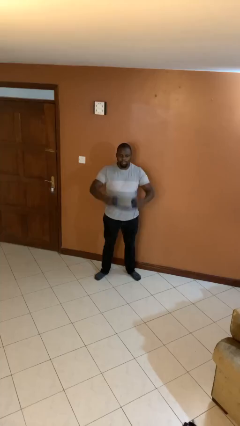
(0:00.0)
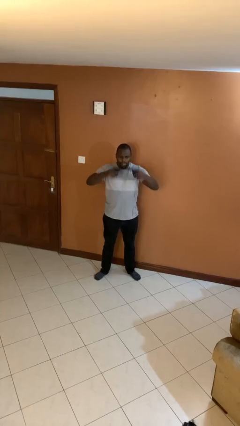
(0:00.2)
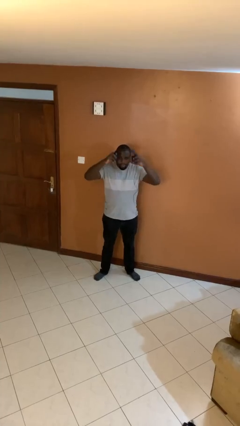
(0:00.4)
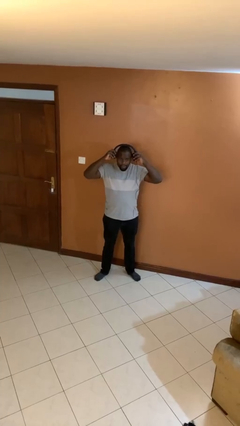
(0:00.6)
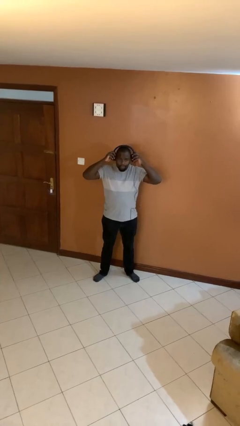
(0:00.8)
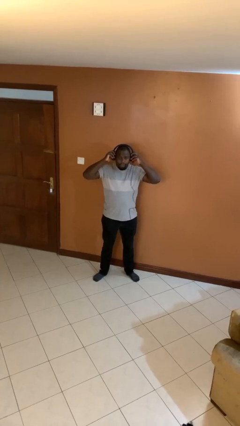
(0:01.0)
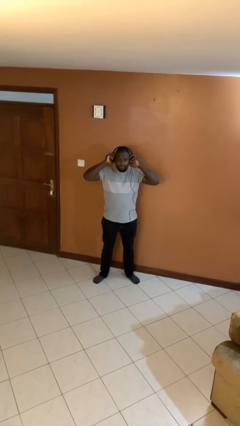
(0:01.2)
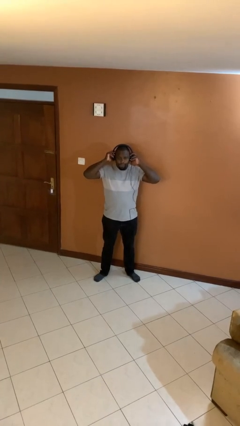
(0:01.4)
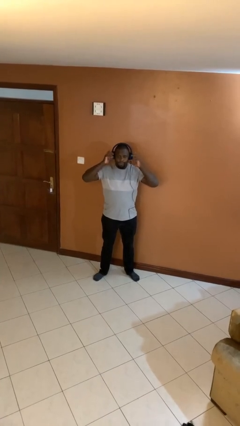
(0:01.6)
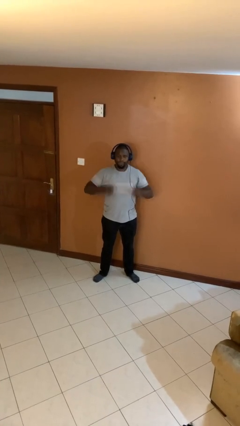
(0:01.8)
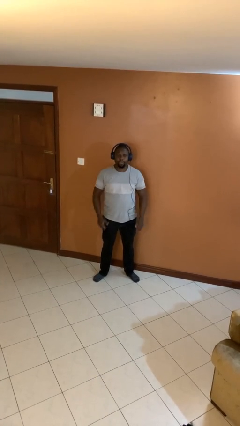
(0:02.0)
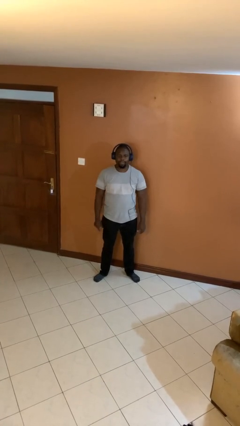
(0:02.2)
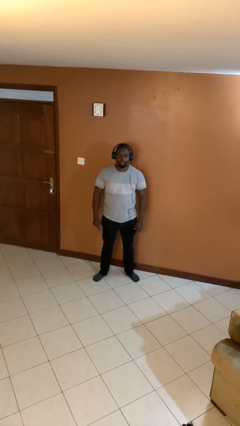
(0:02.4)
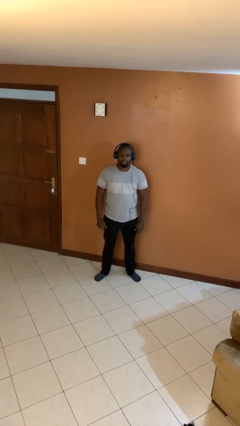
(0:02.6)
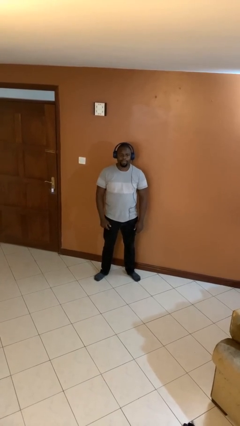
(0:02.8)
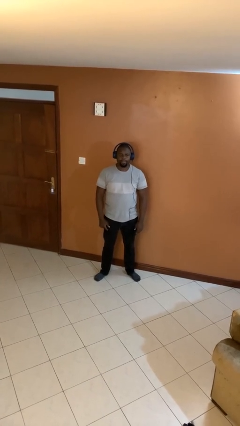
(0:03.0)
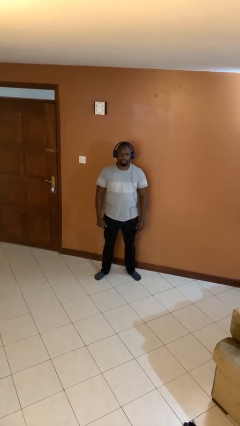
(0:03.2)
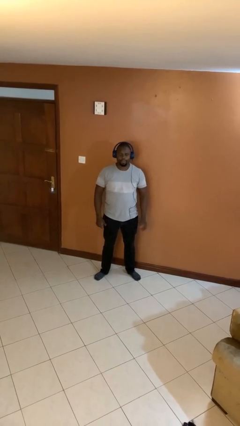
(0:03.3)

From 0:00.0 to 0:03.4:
person puts on headphones

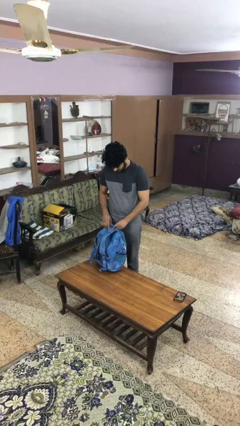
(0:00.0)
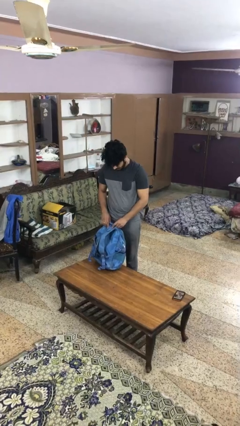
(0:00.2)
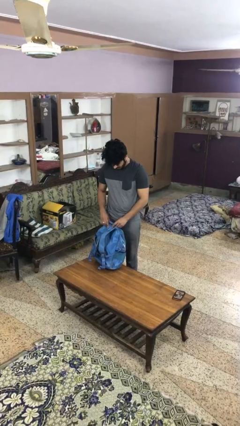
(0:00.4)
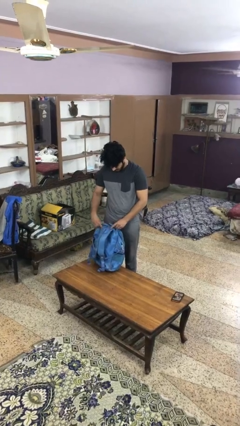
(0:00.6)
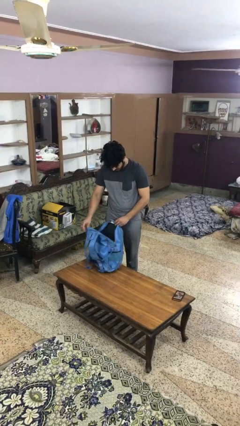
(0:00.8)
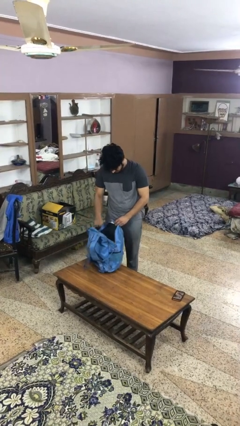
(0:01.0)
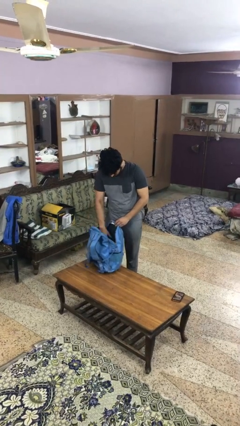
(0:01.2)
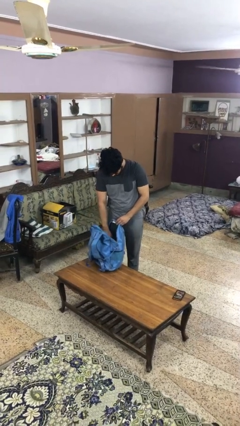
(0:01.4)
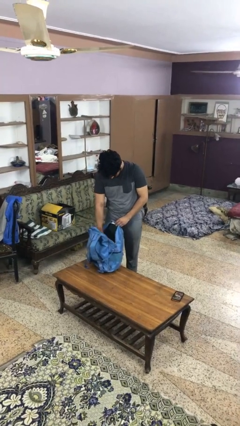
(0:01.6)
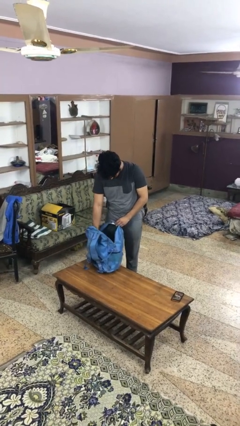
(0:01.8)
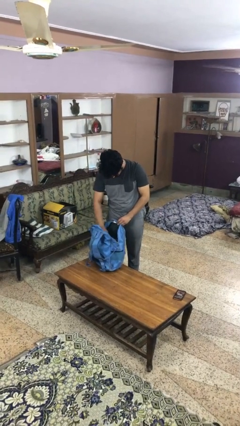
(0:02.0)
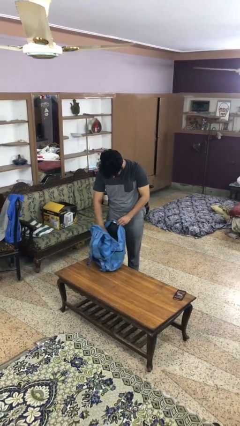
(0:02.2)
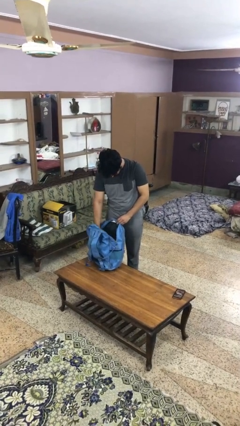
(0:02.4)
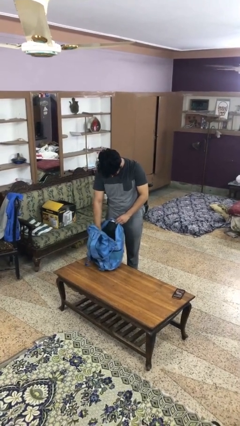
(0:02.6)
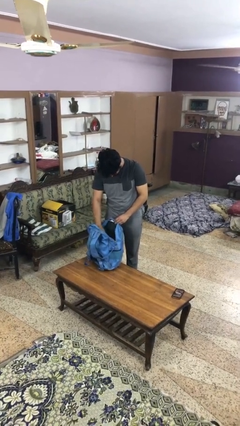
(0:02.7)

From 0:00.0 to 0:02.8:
person searches in bag

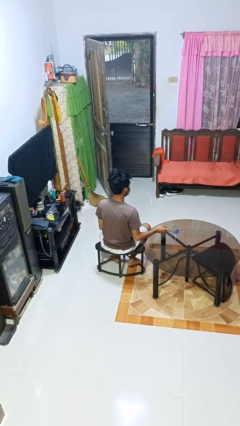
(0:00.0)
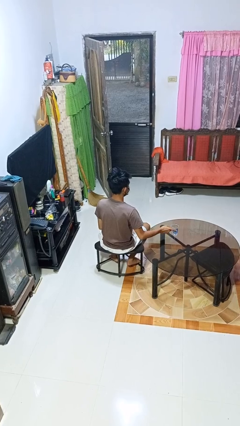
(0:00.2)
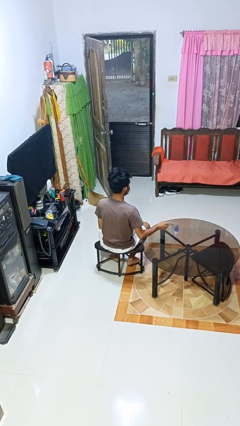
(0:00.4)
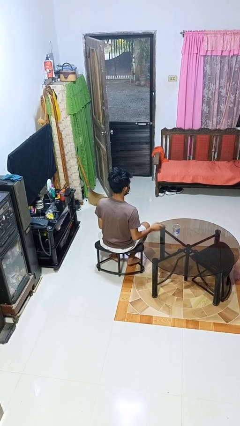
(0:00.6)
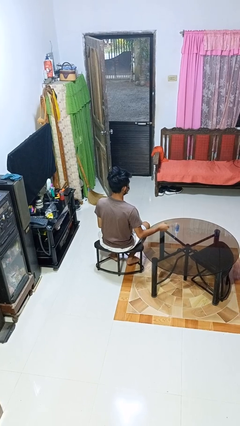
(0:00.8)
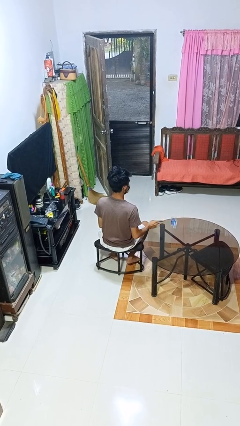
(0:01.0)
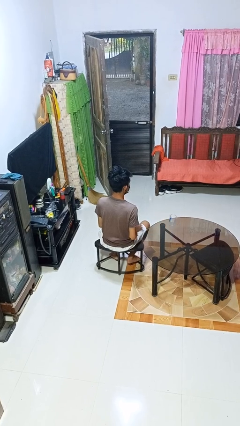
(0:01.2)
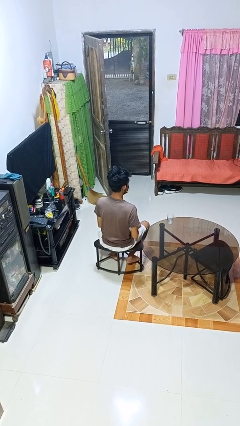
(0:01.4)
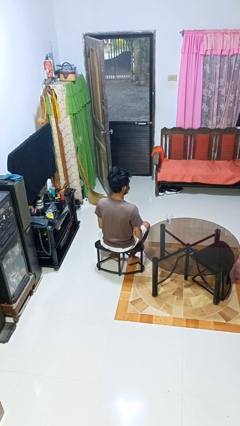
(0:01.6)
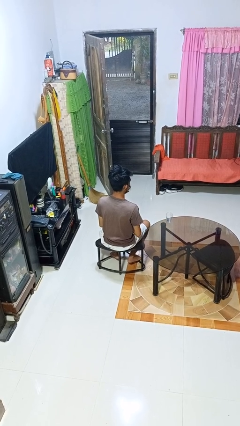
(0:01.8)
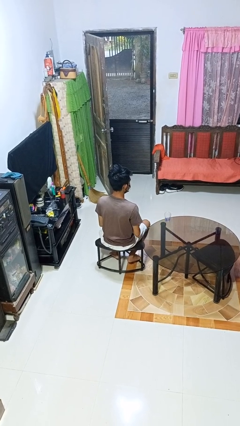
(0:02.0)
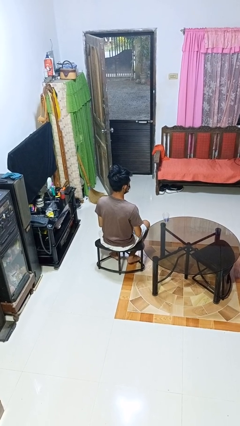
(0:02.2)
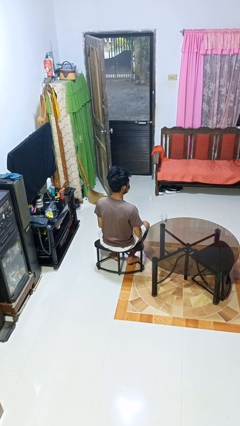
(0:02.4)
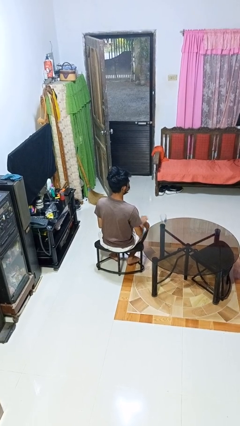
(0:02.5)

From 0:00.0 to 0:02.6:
person knocks over glass

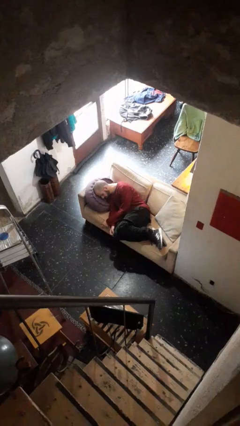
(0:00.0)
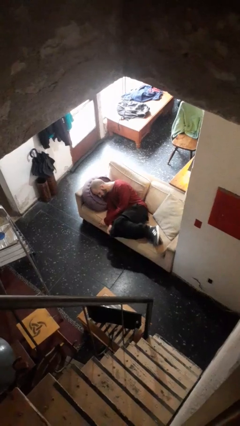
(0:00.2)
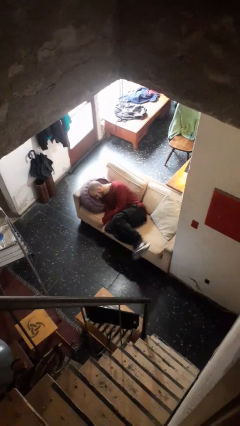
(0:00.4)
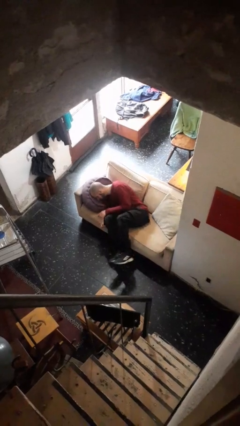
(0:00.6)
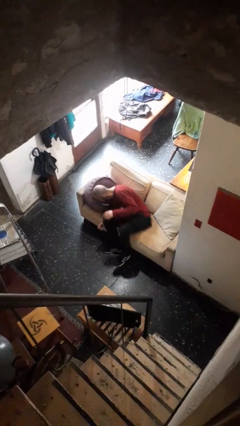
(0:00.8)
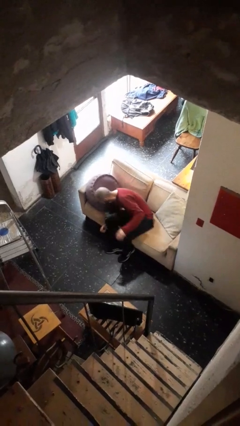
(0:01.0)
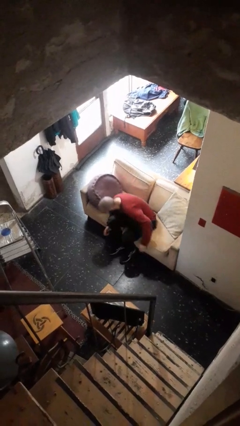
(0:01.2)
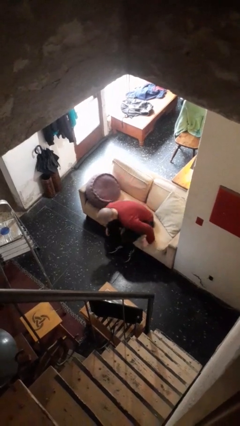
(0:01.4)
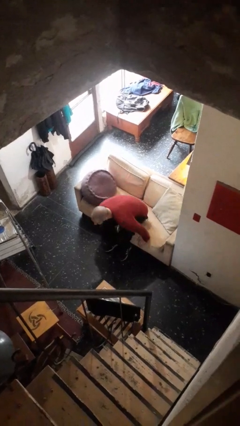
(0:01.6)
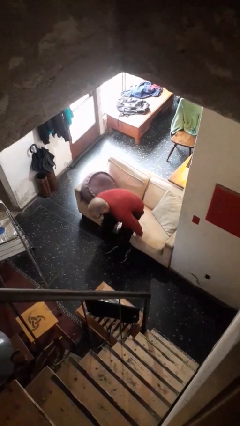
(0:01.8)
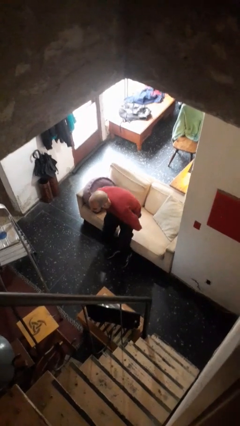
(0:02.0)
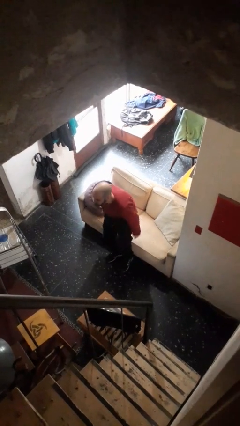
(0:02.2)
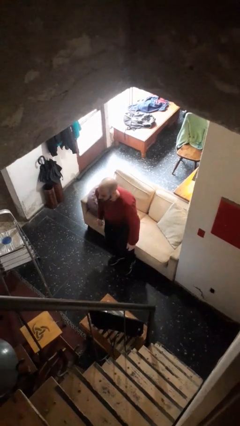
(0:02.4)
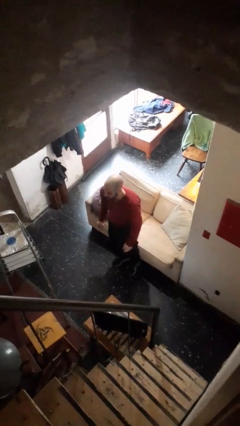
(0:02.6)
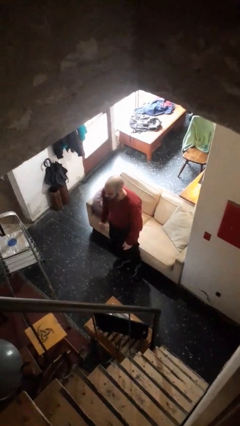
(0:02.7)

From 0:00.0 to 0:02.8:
person stands up

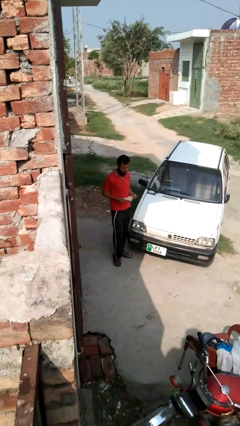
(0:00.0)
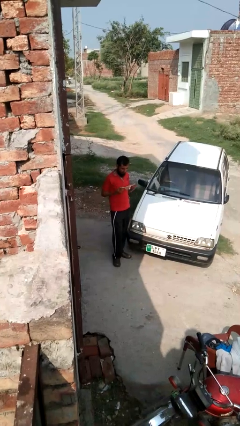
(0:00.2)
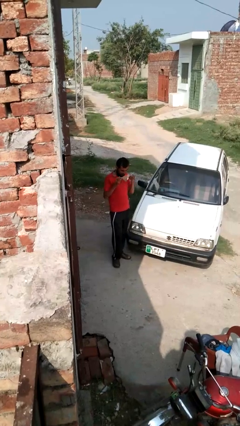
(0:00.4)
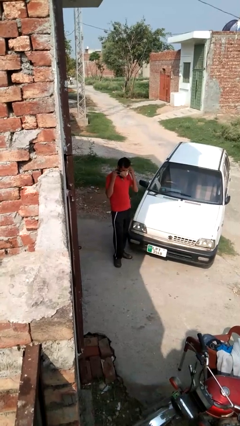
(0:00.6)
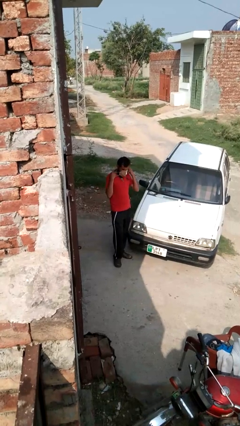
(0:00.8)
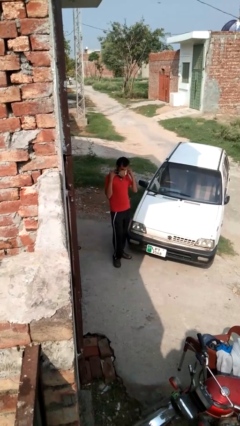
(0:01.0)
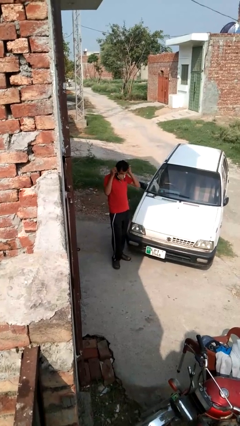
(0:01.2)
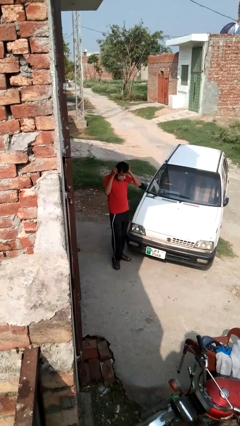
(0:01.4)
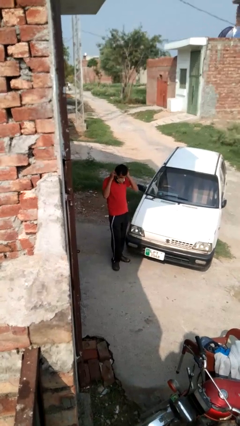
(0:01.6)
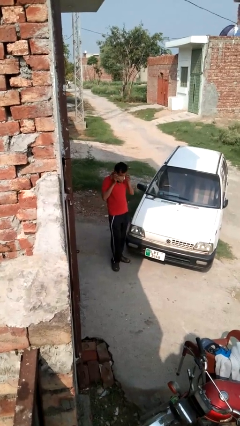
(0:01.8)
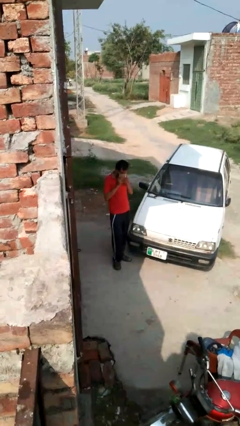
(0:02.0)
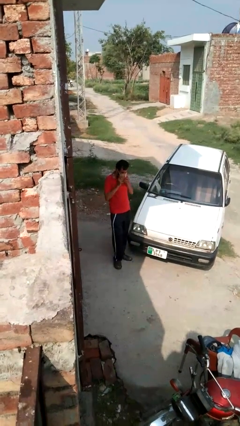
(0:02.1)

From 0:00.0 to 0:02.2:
person puts on facemask

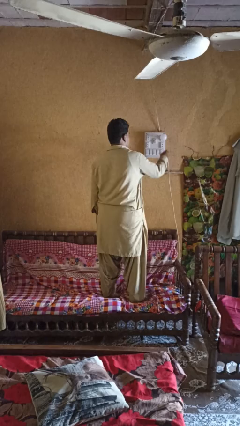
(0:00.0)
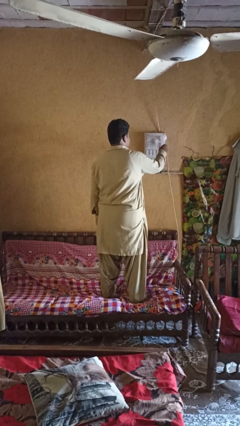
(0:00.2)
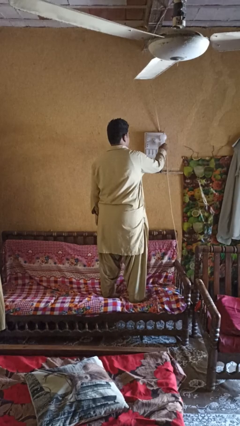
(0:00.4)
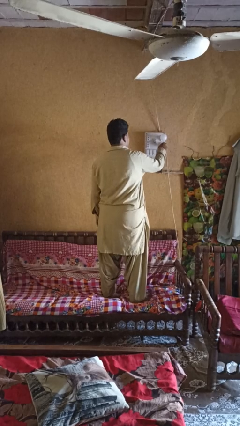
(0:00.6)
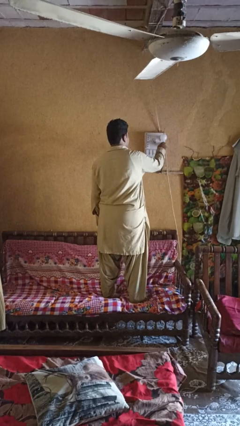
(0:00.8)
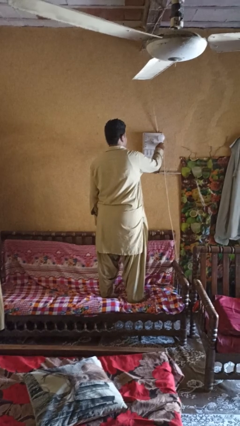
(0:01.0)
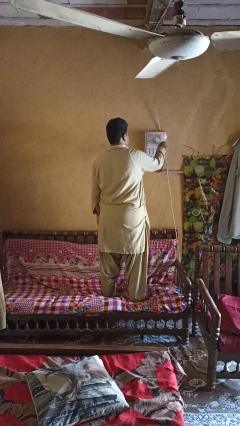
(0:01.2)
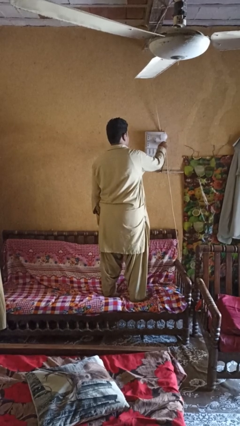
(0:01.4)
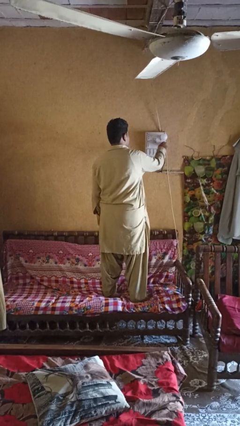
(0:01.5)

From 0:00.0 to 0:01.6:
person plugs into electrical socket

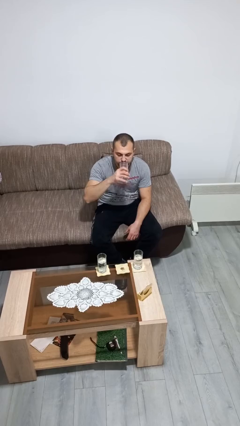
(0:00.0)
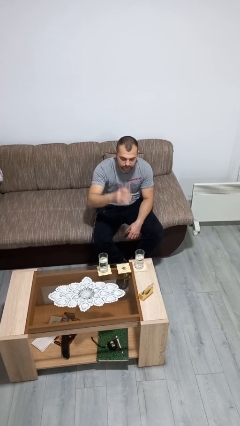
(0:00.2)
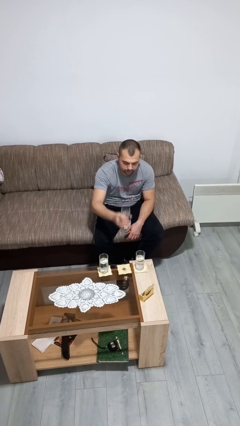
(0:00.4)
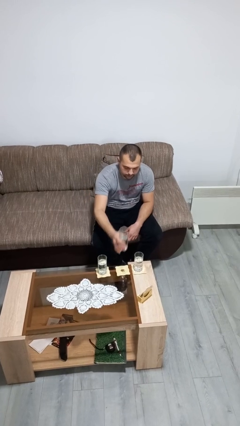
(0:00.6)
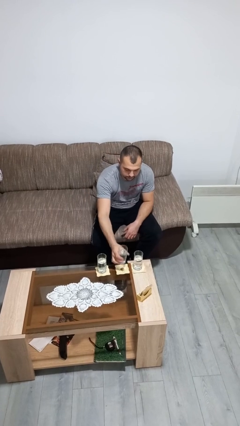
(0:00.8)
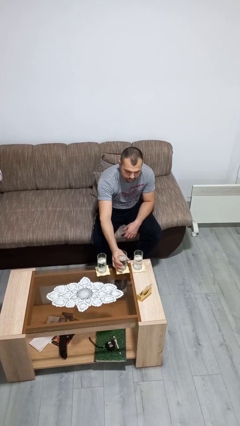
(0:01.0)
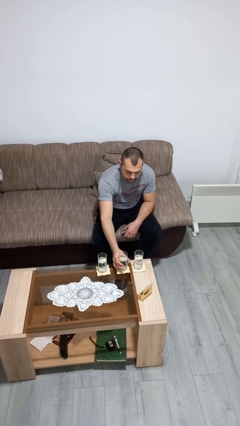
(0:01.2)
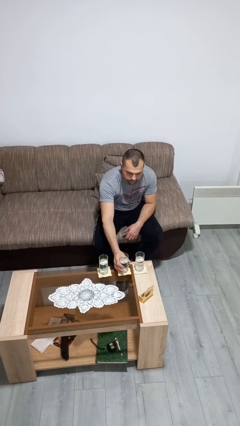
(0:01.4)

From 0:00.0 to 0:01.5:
person puts down object on table
